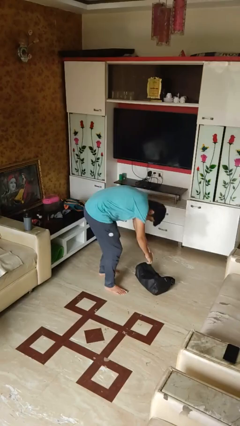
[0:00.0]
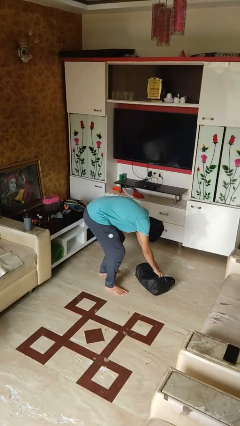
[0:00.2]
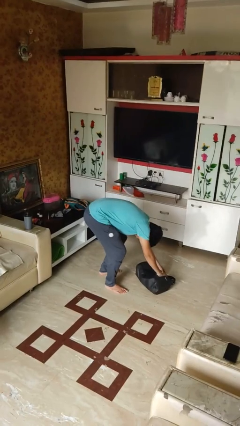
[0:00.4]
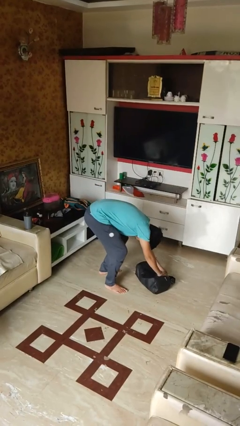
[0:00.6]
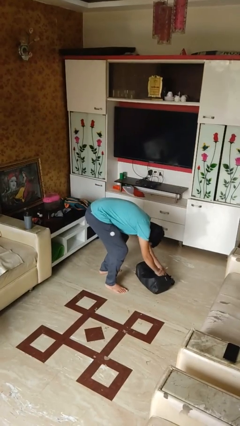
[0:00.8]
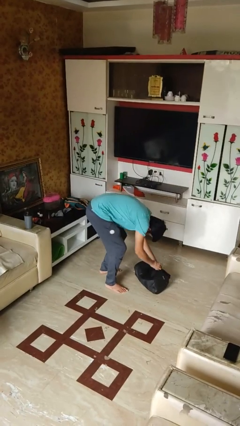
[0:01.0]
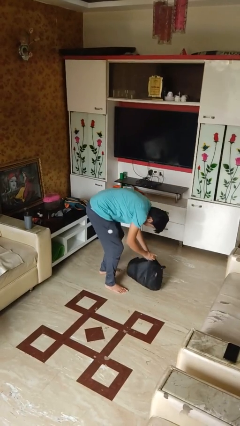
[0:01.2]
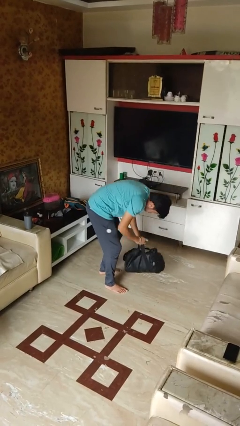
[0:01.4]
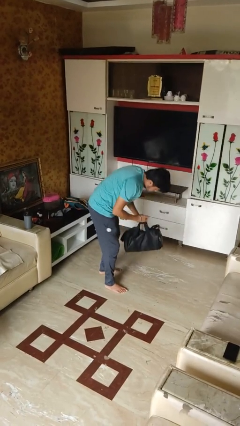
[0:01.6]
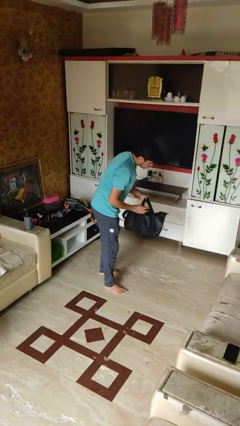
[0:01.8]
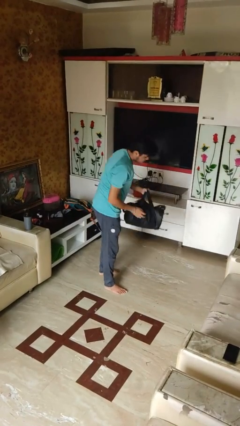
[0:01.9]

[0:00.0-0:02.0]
person picks up object from floor

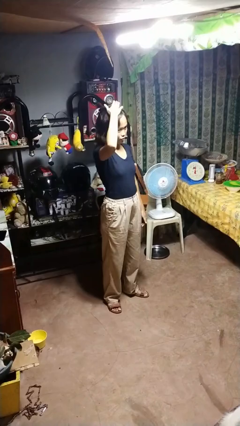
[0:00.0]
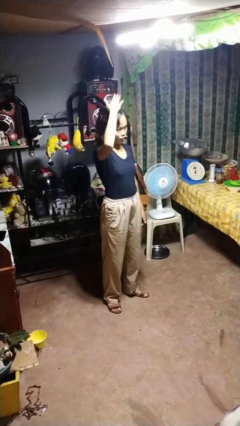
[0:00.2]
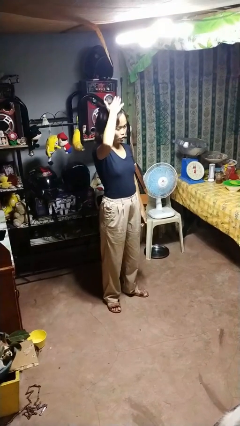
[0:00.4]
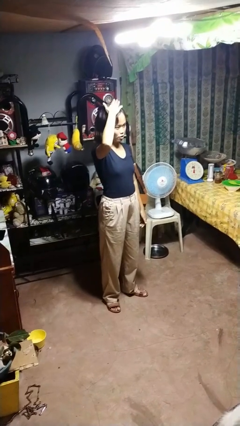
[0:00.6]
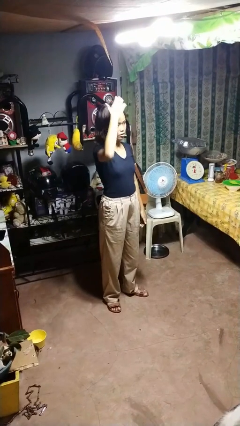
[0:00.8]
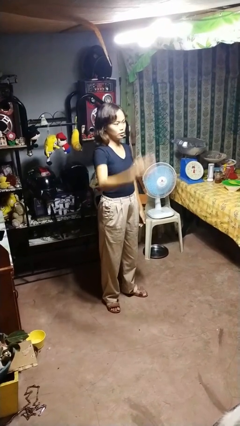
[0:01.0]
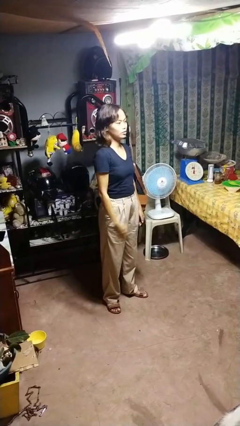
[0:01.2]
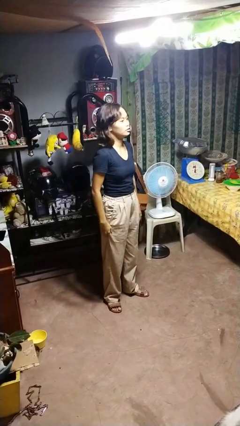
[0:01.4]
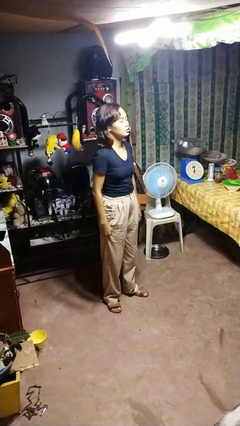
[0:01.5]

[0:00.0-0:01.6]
person pats head

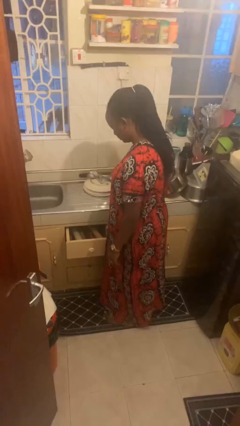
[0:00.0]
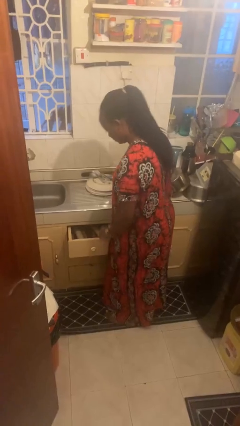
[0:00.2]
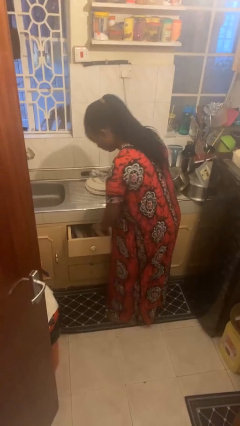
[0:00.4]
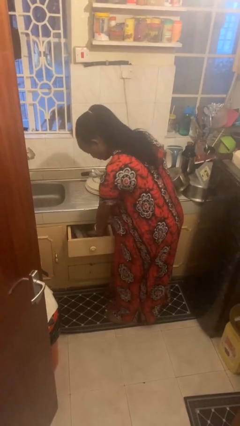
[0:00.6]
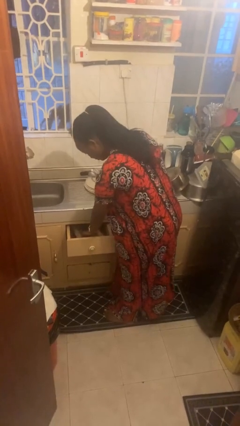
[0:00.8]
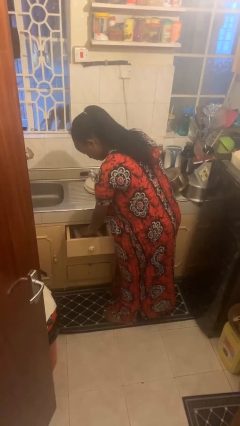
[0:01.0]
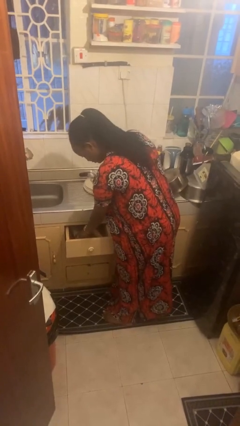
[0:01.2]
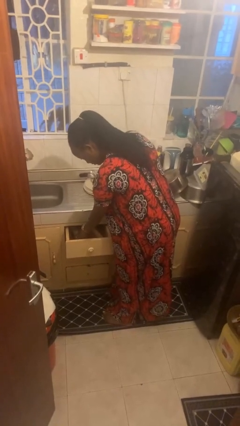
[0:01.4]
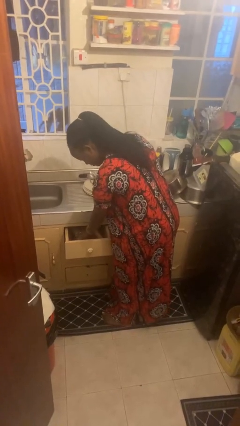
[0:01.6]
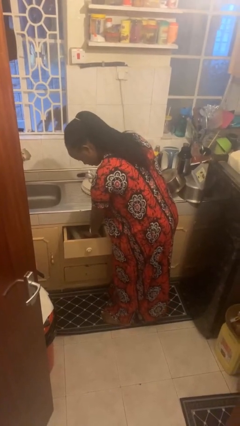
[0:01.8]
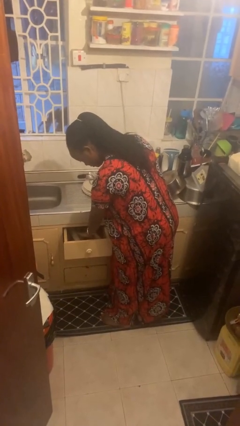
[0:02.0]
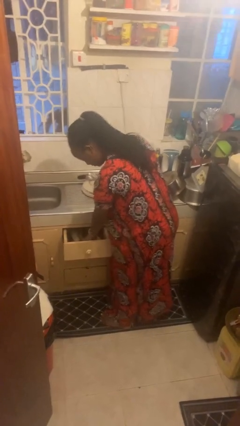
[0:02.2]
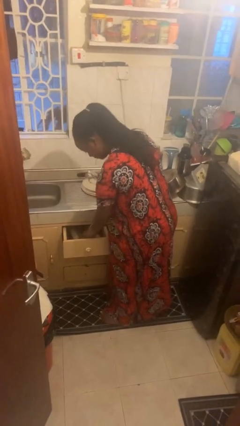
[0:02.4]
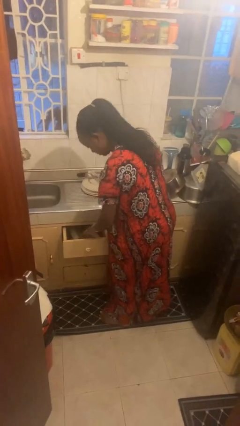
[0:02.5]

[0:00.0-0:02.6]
person searches in kitchen drawer

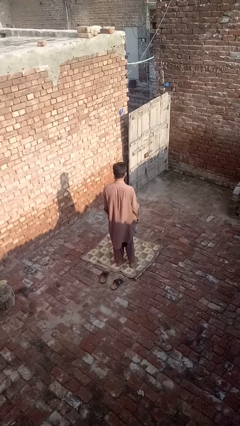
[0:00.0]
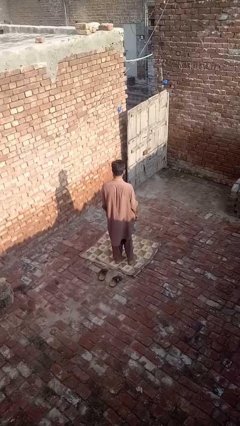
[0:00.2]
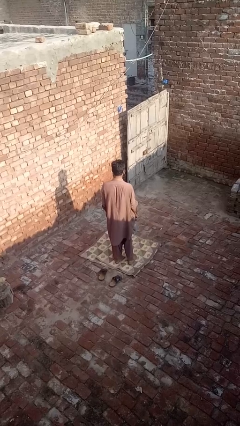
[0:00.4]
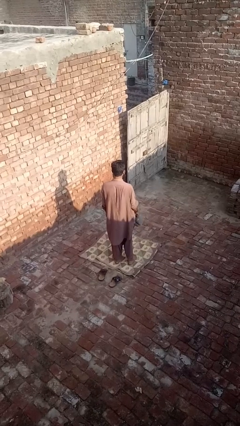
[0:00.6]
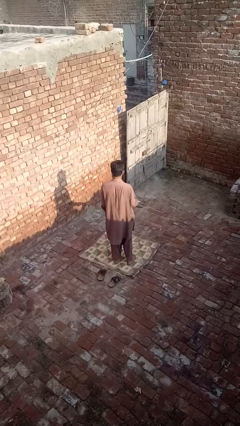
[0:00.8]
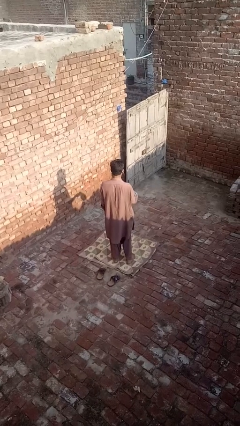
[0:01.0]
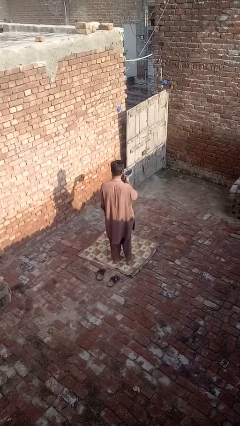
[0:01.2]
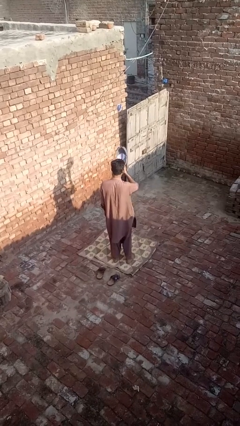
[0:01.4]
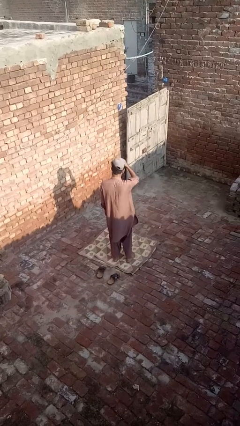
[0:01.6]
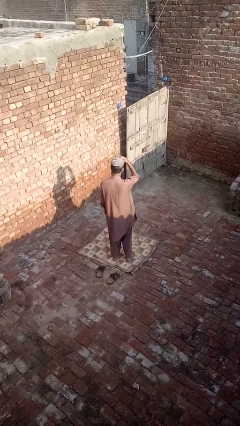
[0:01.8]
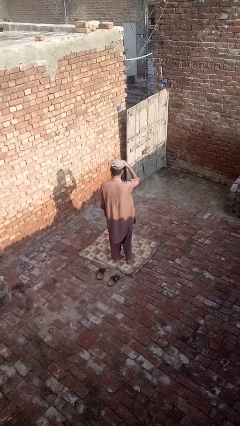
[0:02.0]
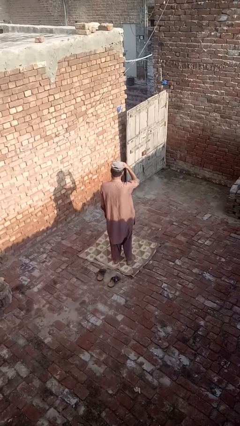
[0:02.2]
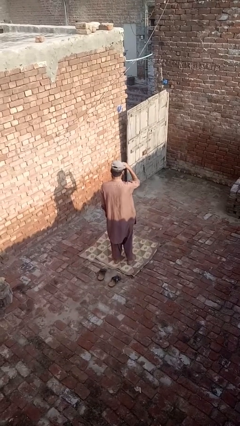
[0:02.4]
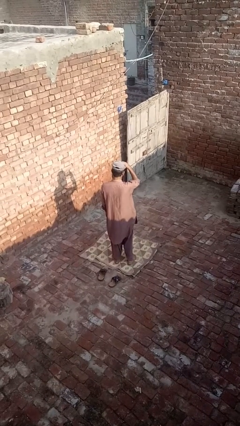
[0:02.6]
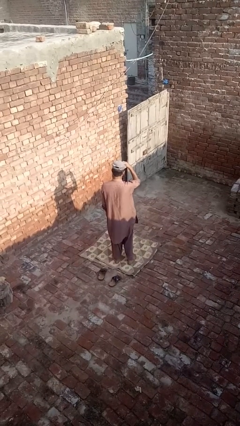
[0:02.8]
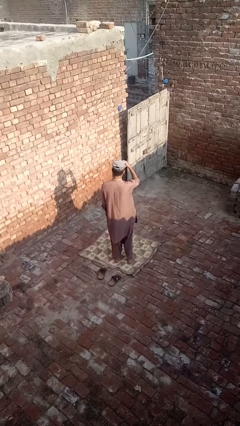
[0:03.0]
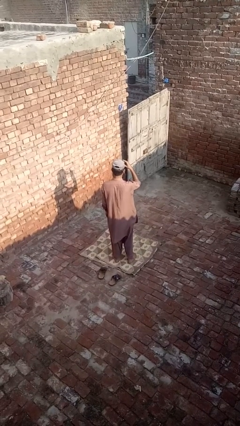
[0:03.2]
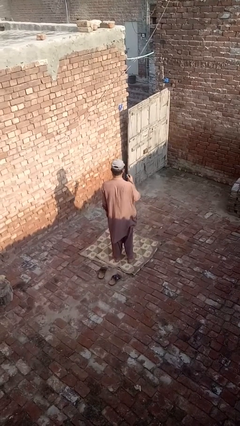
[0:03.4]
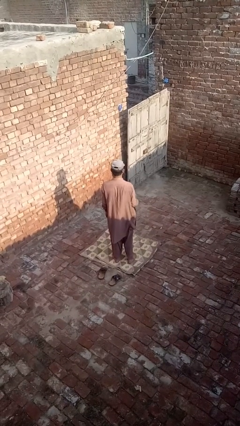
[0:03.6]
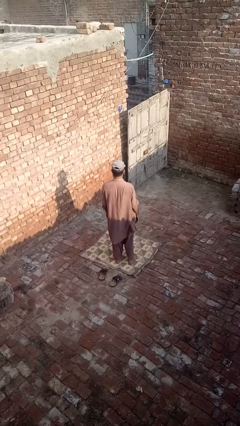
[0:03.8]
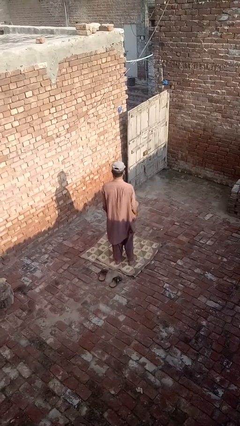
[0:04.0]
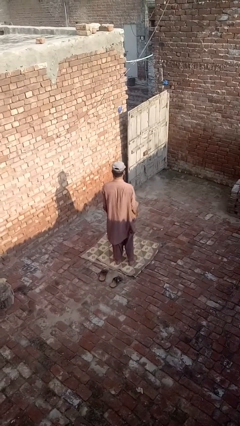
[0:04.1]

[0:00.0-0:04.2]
person puts on hat

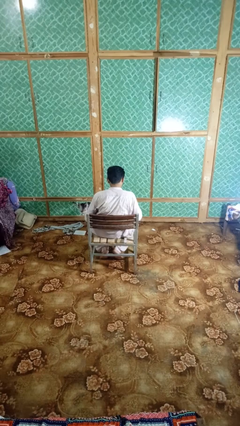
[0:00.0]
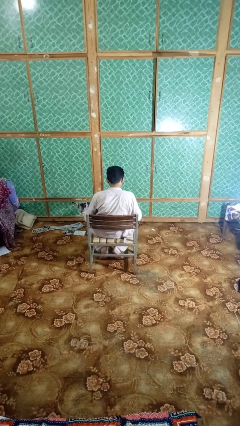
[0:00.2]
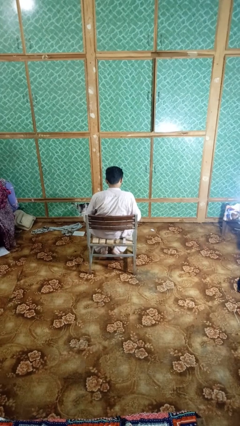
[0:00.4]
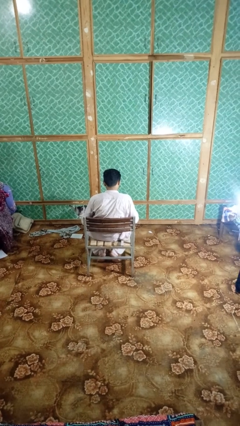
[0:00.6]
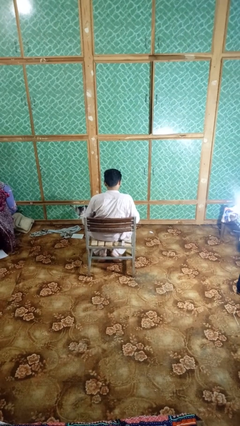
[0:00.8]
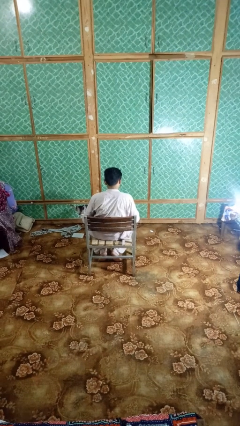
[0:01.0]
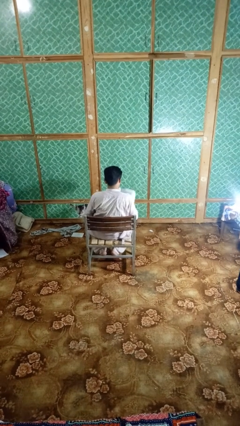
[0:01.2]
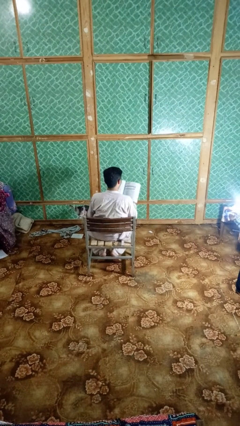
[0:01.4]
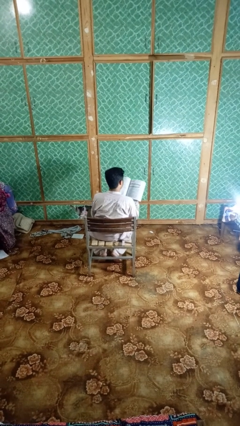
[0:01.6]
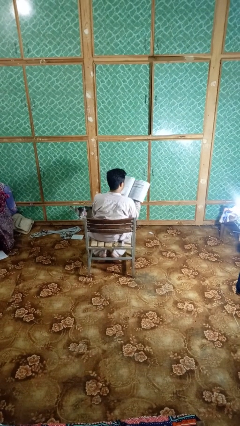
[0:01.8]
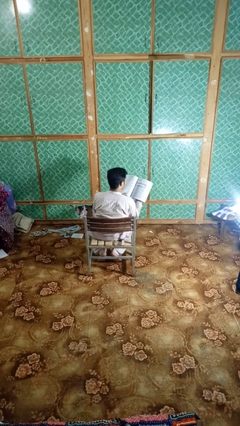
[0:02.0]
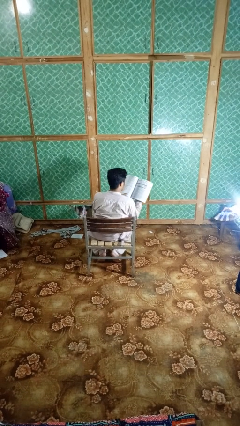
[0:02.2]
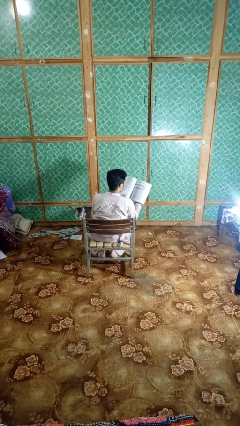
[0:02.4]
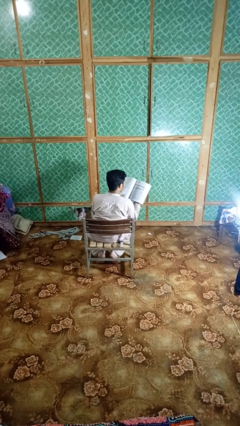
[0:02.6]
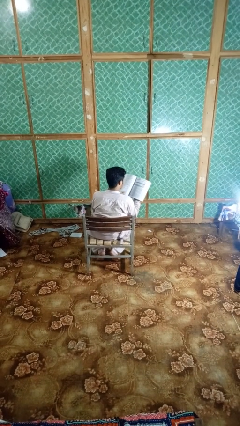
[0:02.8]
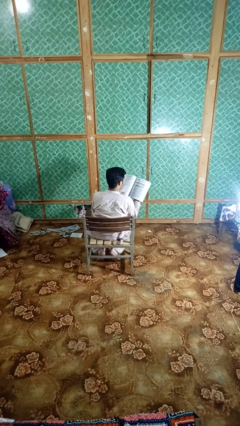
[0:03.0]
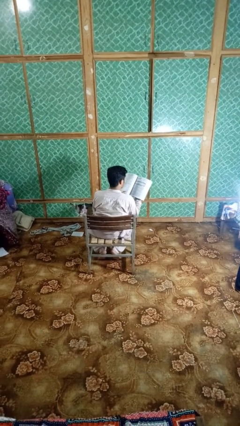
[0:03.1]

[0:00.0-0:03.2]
person reads book

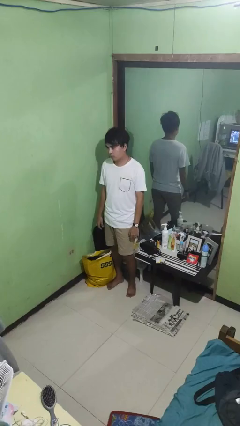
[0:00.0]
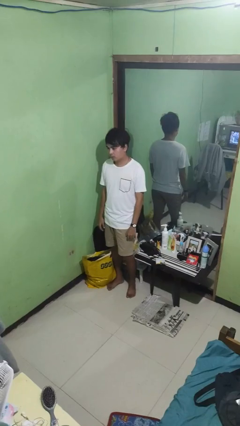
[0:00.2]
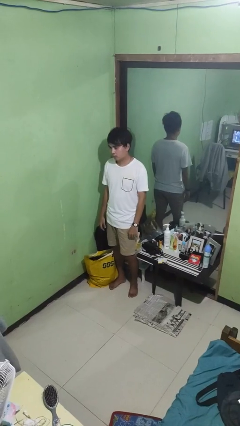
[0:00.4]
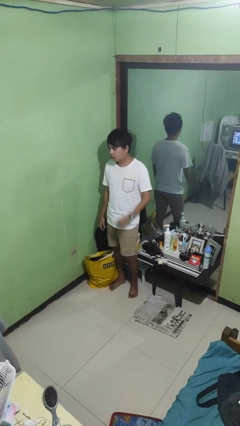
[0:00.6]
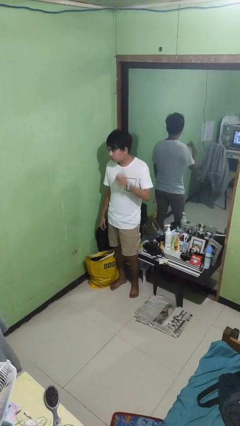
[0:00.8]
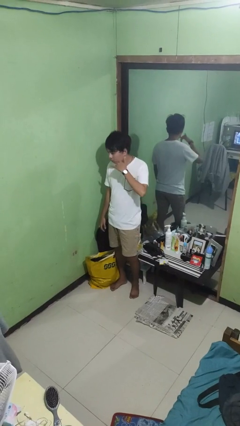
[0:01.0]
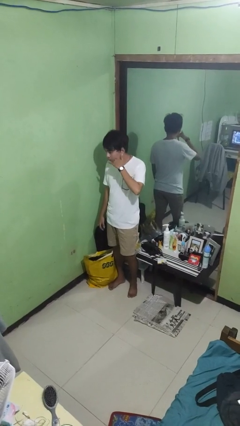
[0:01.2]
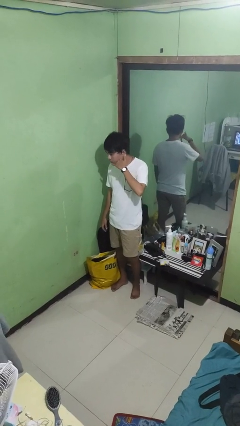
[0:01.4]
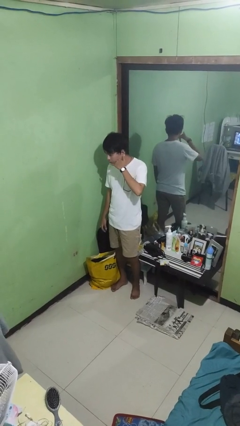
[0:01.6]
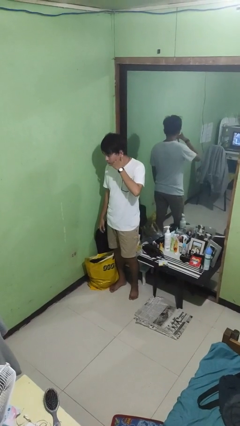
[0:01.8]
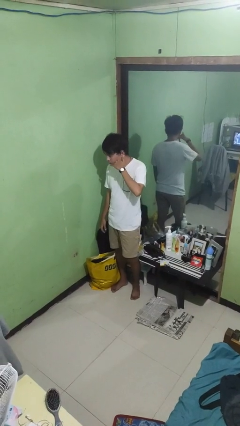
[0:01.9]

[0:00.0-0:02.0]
person gestures call me

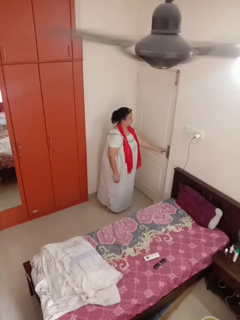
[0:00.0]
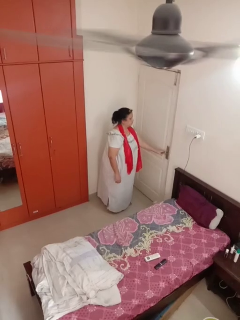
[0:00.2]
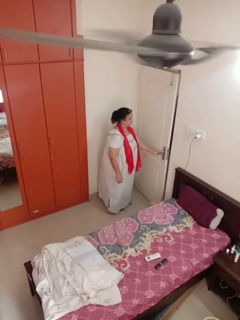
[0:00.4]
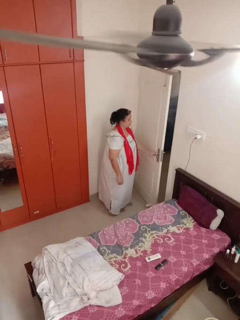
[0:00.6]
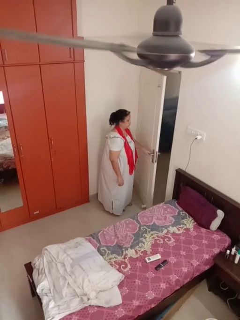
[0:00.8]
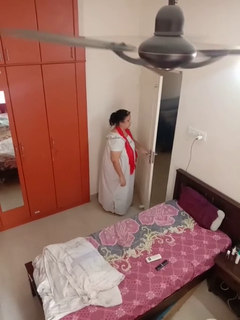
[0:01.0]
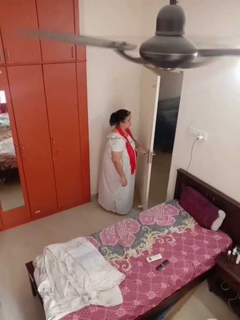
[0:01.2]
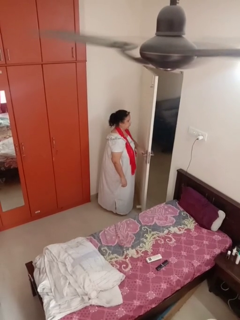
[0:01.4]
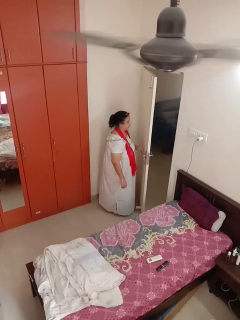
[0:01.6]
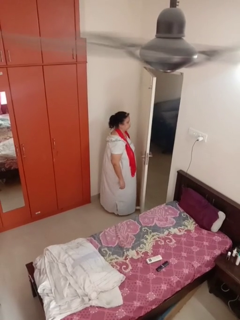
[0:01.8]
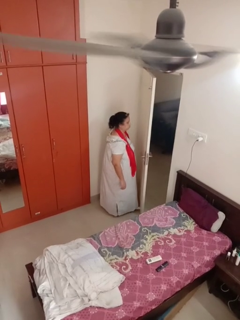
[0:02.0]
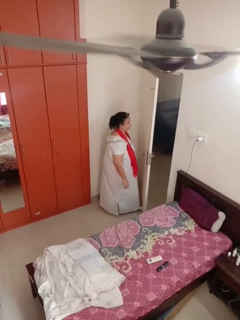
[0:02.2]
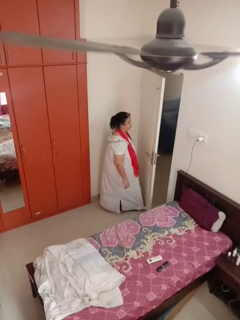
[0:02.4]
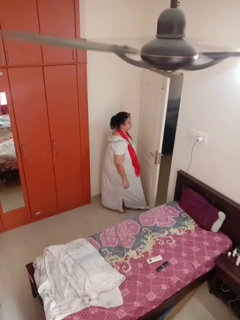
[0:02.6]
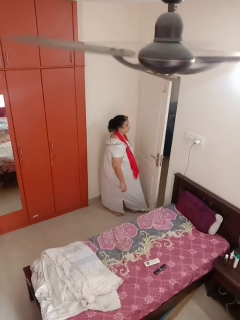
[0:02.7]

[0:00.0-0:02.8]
person opens facility door
